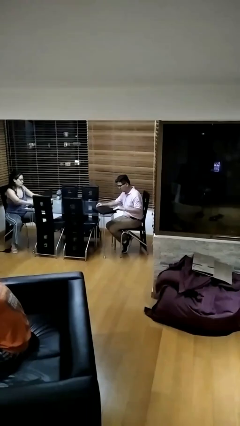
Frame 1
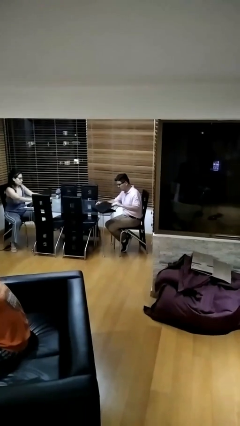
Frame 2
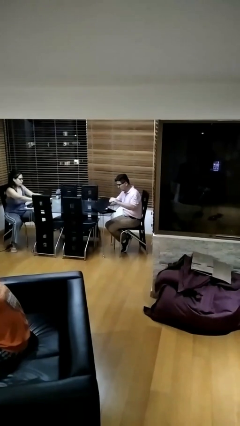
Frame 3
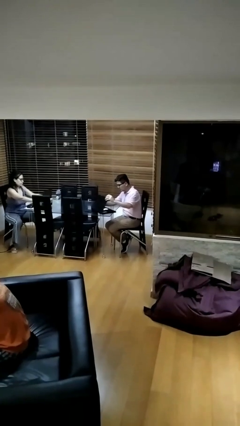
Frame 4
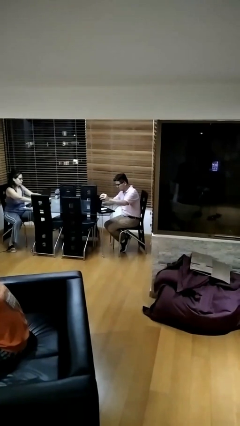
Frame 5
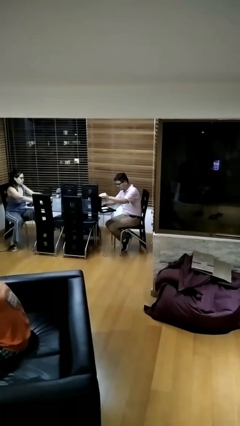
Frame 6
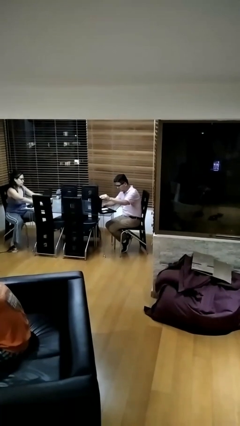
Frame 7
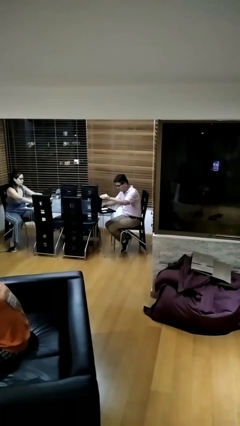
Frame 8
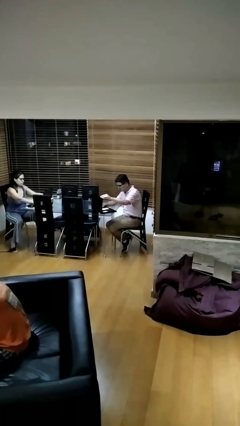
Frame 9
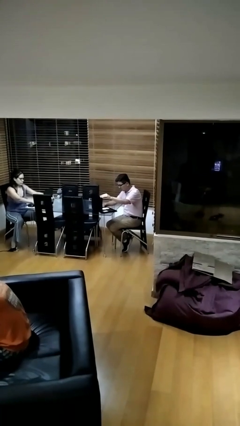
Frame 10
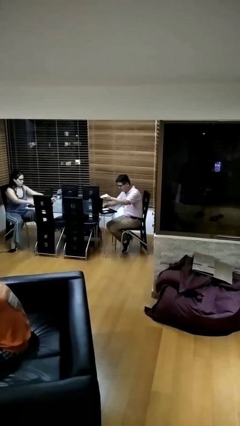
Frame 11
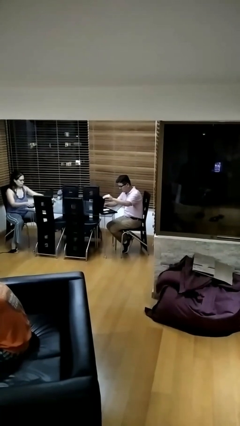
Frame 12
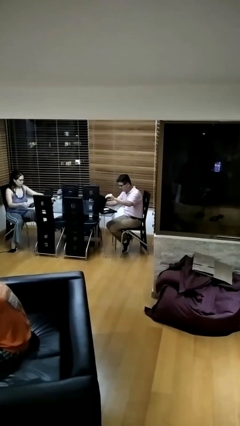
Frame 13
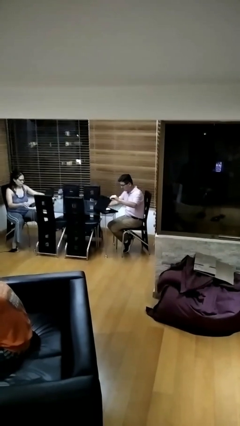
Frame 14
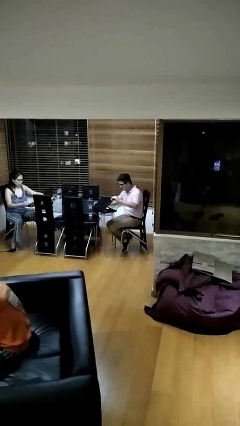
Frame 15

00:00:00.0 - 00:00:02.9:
person interacts with laptop

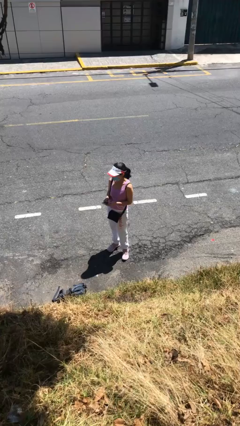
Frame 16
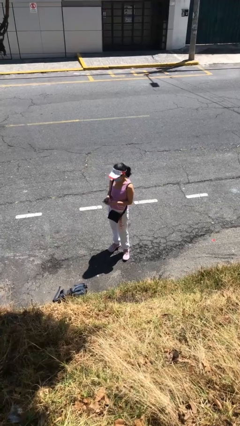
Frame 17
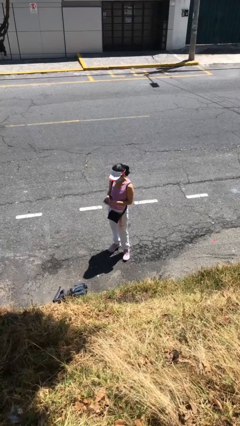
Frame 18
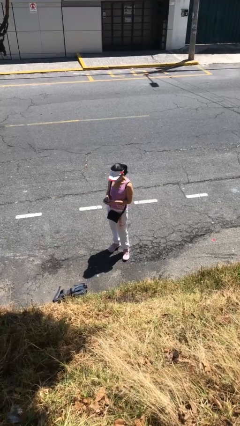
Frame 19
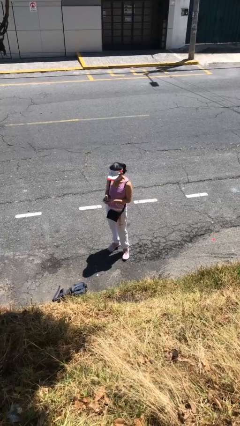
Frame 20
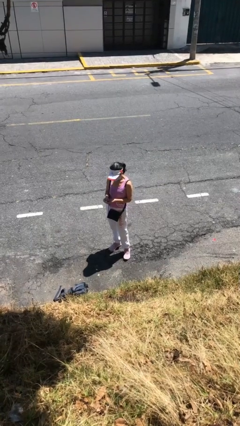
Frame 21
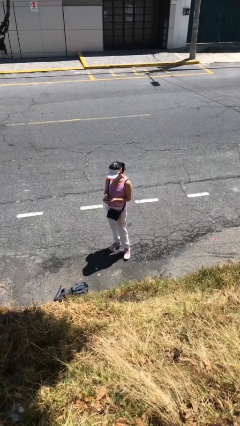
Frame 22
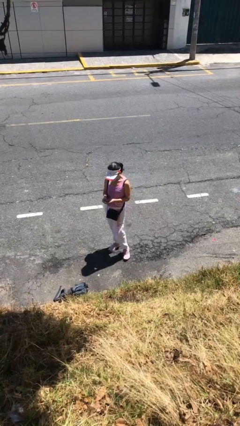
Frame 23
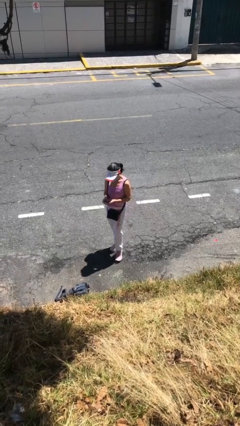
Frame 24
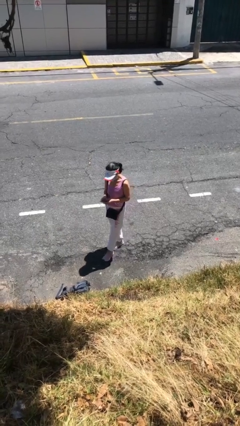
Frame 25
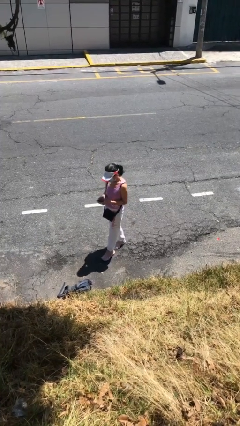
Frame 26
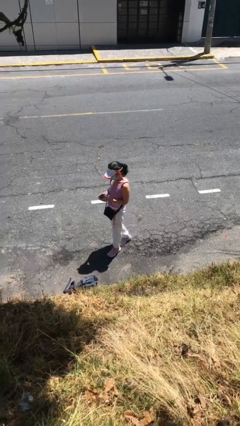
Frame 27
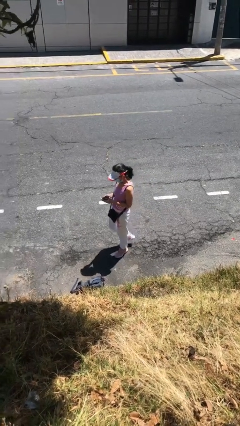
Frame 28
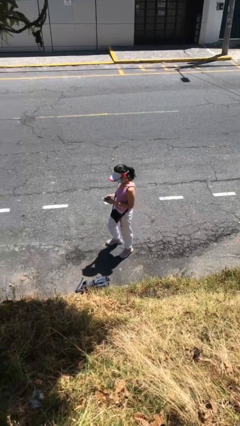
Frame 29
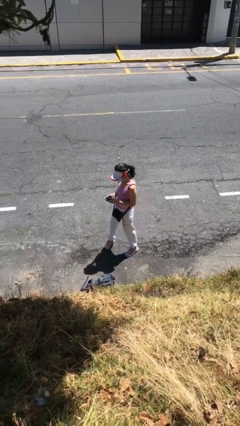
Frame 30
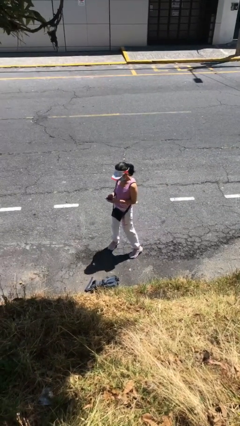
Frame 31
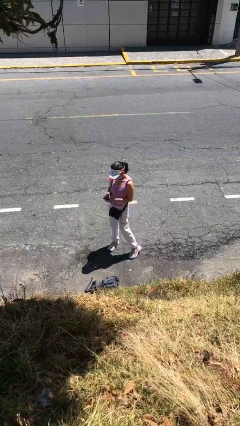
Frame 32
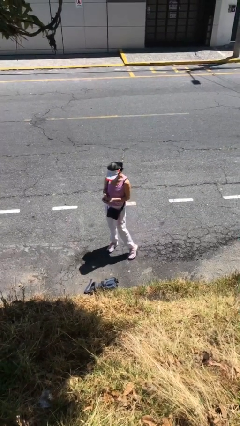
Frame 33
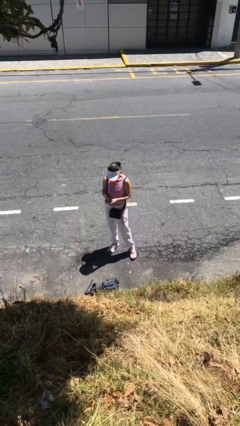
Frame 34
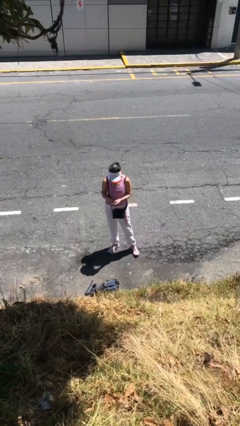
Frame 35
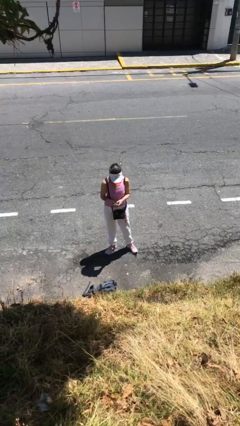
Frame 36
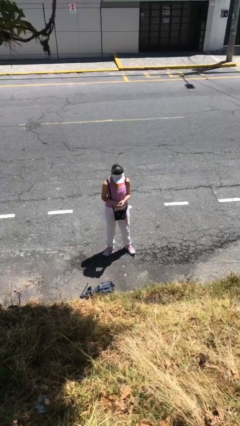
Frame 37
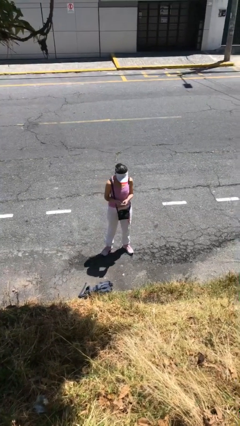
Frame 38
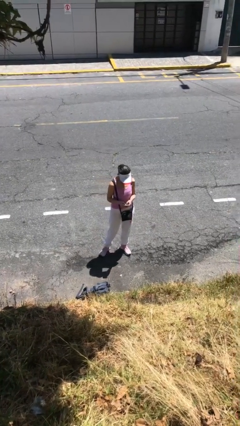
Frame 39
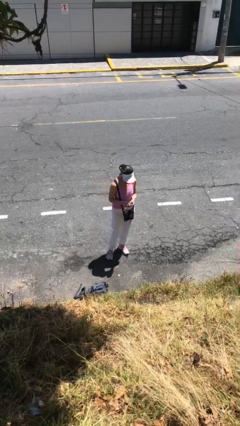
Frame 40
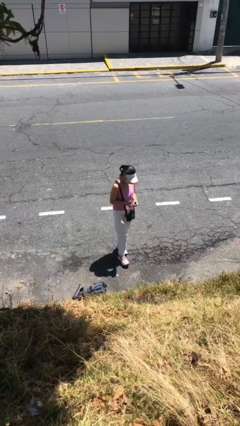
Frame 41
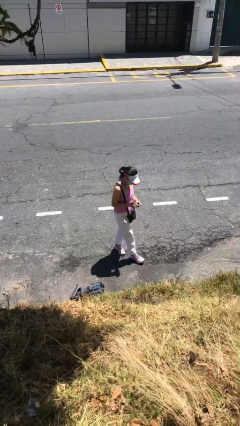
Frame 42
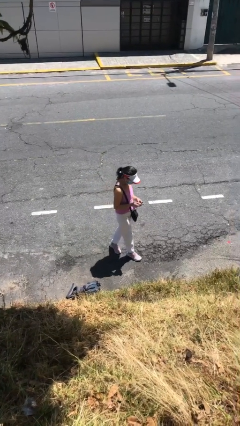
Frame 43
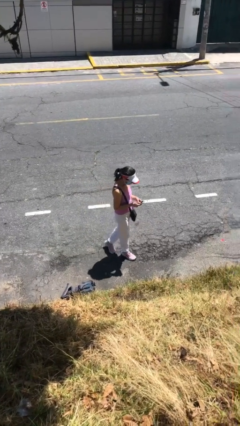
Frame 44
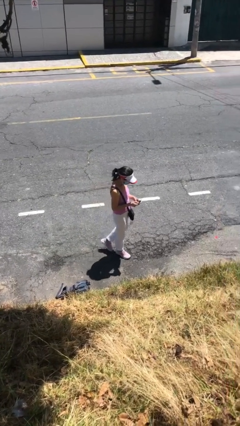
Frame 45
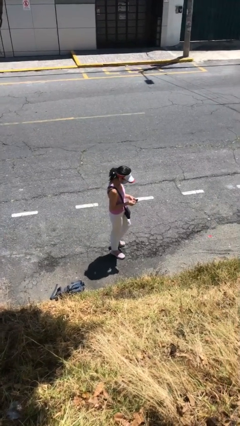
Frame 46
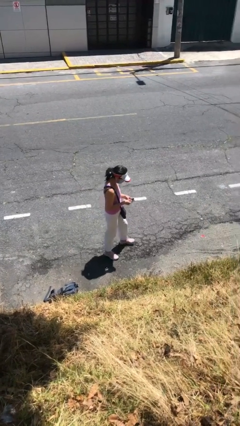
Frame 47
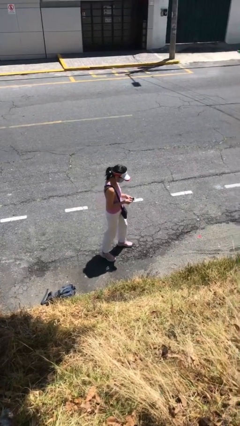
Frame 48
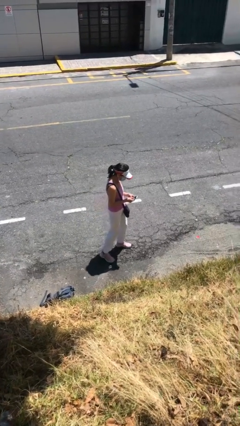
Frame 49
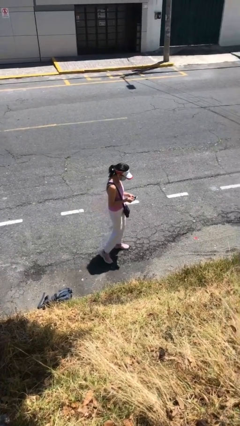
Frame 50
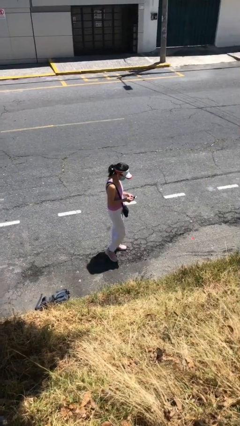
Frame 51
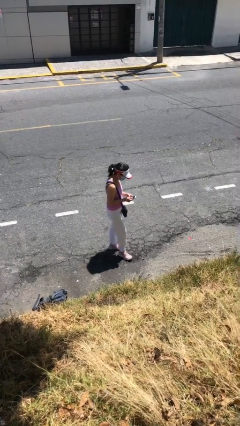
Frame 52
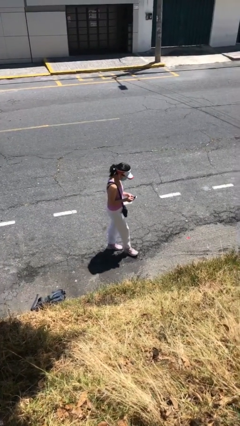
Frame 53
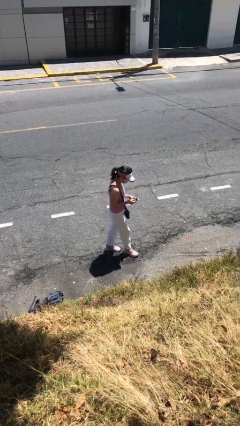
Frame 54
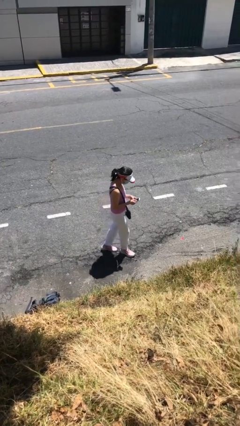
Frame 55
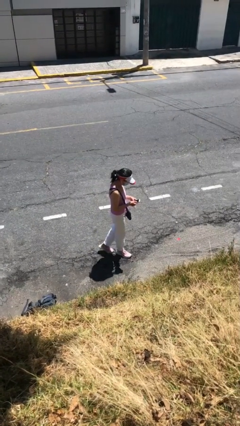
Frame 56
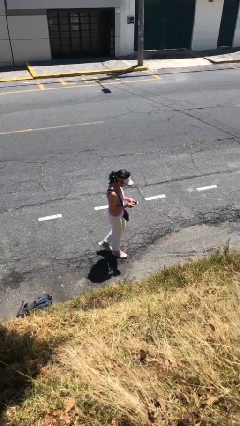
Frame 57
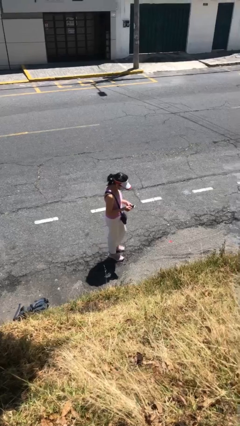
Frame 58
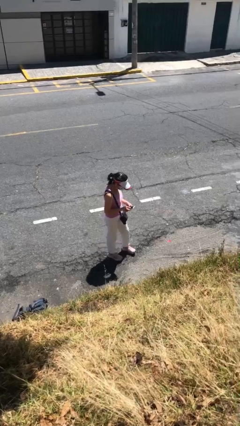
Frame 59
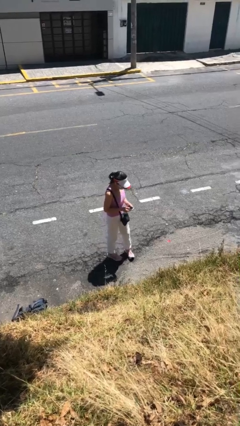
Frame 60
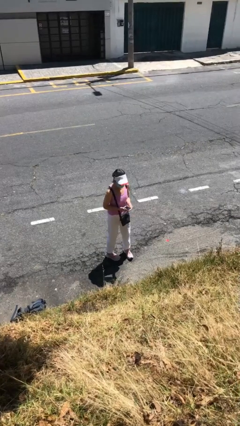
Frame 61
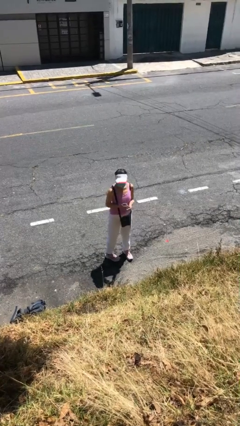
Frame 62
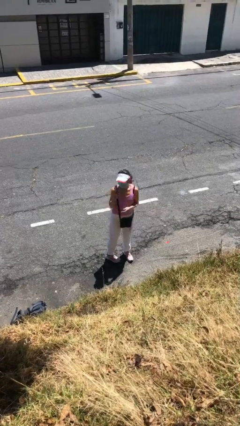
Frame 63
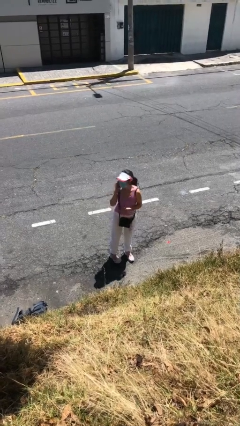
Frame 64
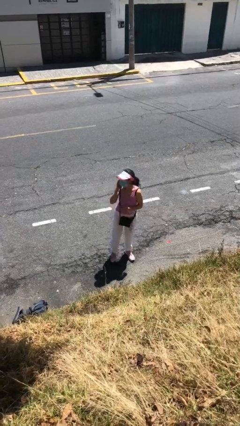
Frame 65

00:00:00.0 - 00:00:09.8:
person texts on phone

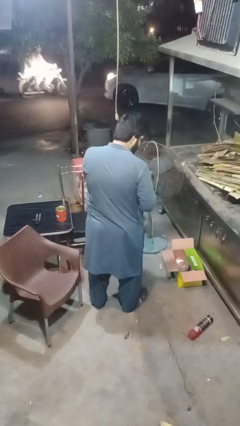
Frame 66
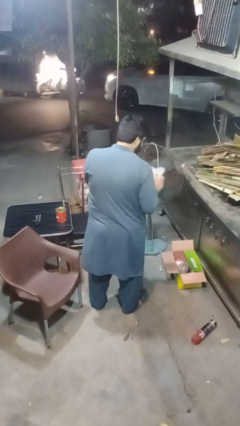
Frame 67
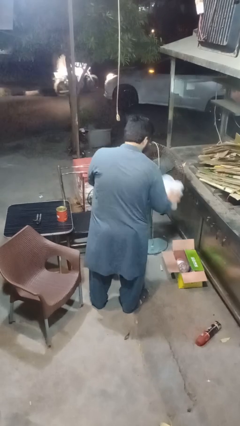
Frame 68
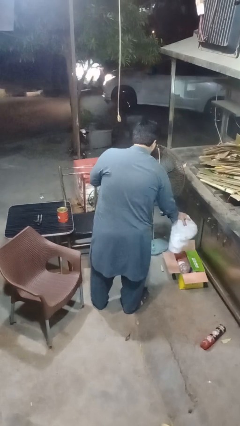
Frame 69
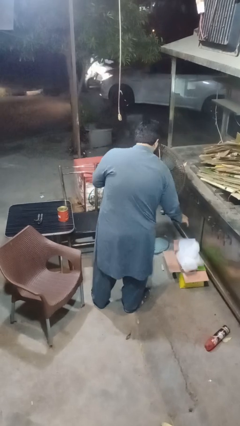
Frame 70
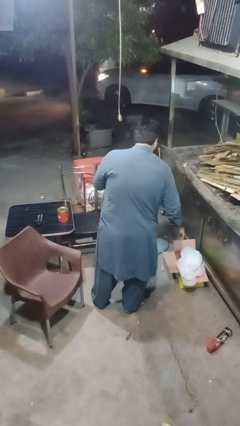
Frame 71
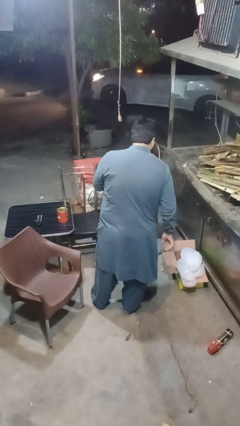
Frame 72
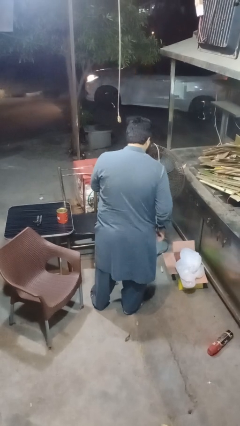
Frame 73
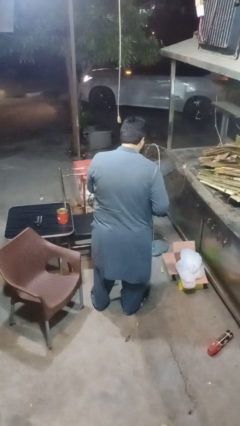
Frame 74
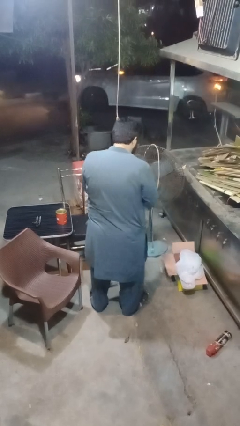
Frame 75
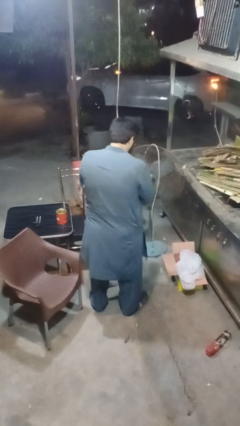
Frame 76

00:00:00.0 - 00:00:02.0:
person discards trash

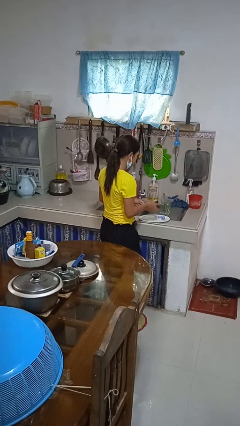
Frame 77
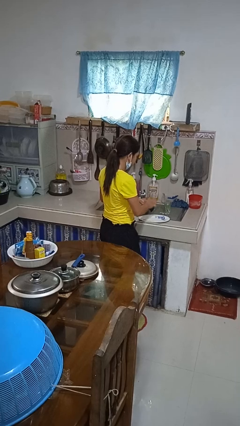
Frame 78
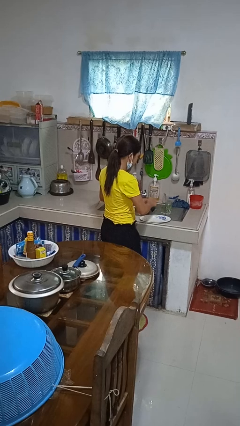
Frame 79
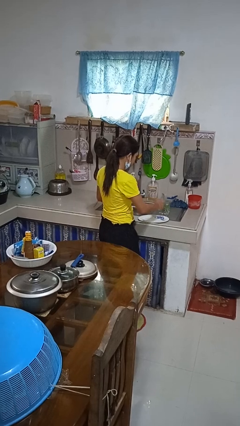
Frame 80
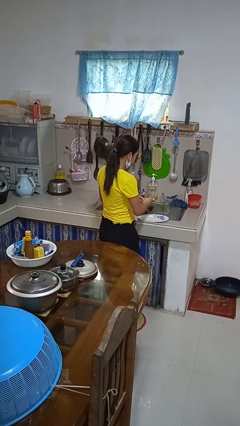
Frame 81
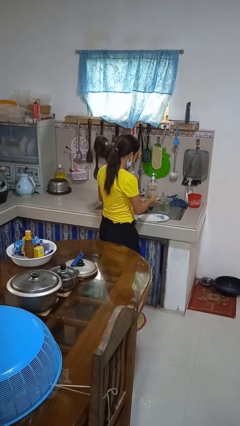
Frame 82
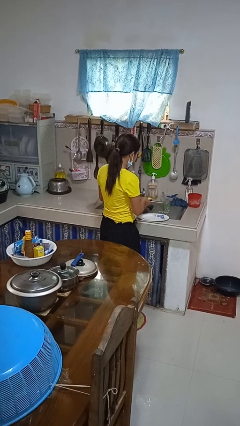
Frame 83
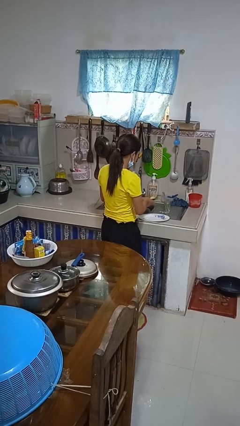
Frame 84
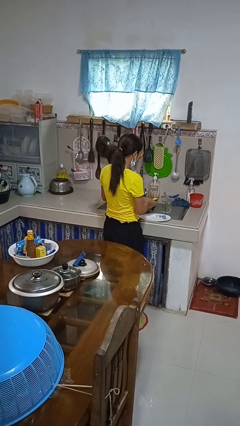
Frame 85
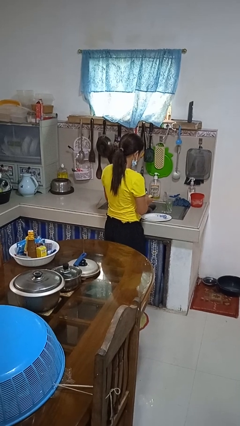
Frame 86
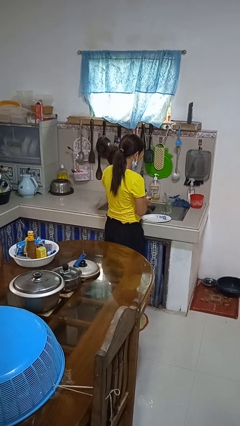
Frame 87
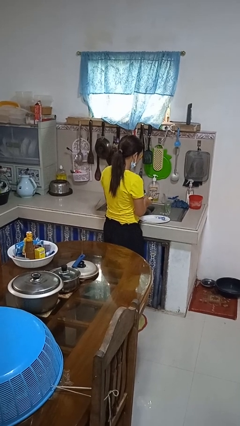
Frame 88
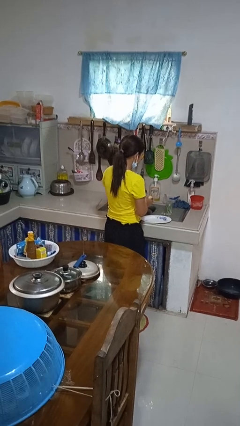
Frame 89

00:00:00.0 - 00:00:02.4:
person washes dish

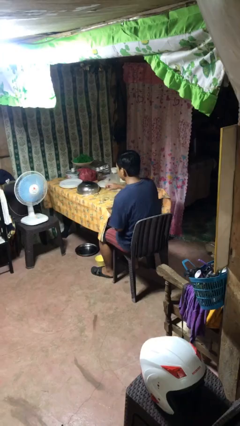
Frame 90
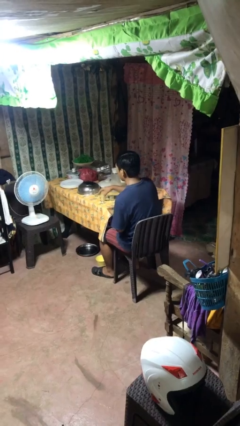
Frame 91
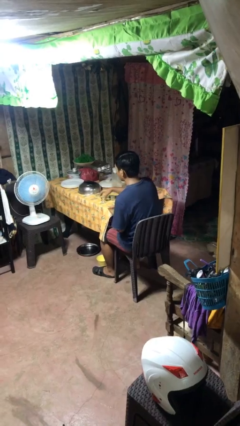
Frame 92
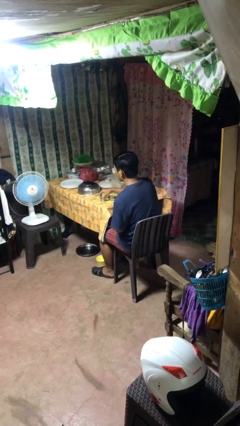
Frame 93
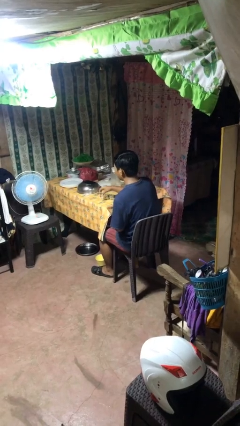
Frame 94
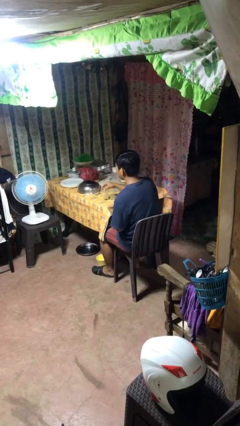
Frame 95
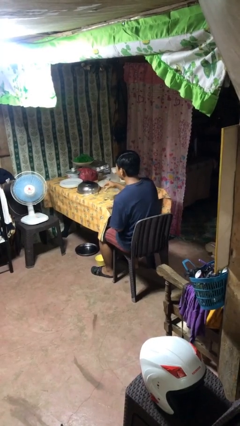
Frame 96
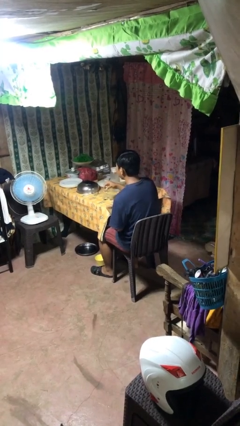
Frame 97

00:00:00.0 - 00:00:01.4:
person picks up object from table
